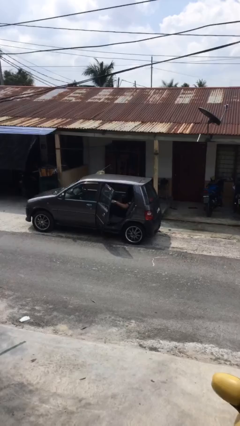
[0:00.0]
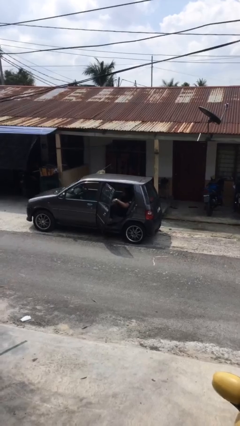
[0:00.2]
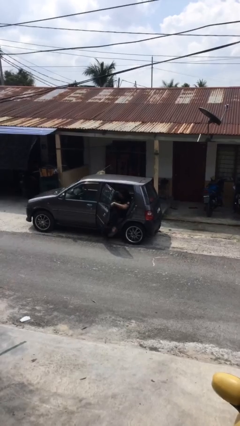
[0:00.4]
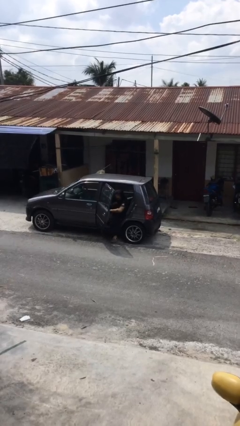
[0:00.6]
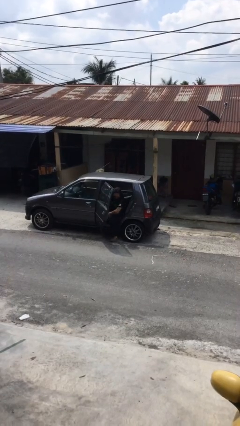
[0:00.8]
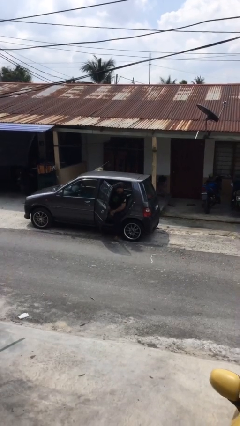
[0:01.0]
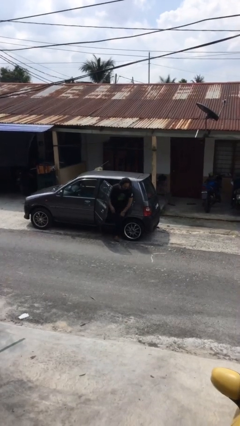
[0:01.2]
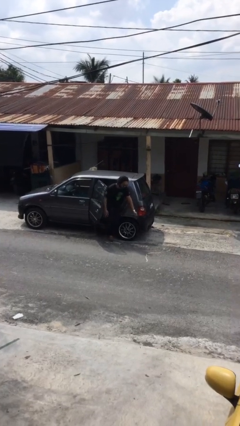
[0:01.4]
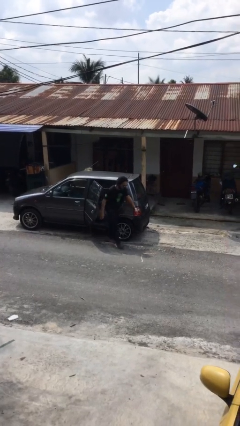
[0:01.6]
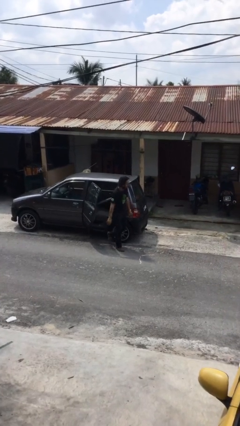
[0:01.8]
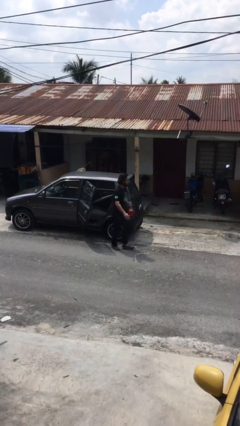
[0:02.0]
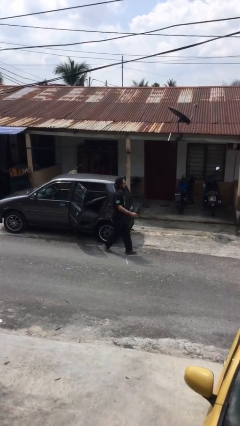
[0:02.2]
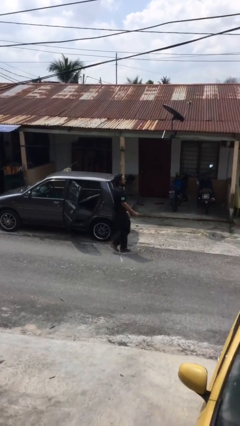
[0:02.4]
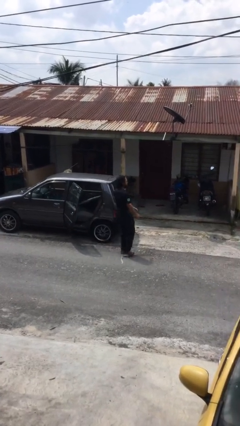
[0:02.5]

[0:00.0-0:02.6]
person exits car

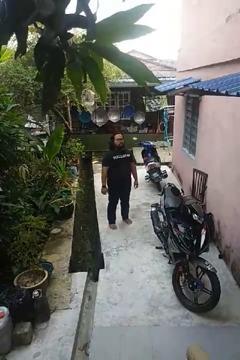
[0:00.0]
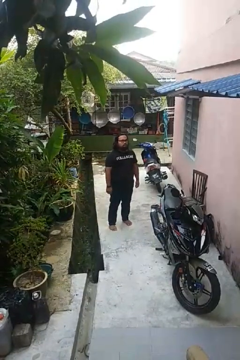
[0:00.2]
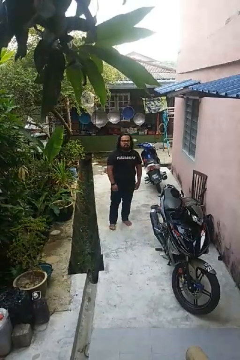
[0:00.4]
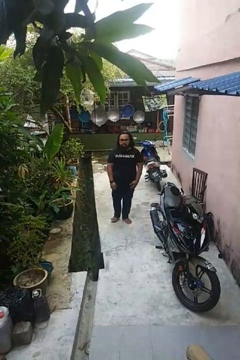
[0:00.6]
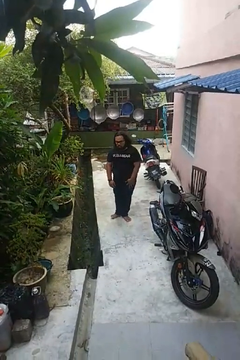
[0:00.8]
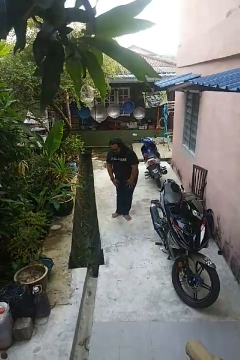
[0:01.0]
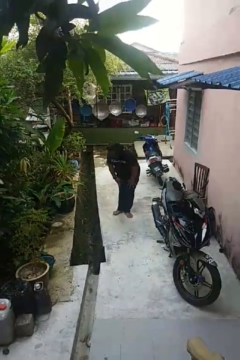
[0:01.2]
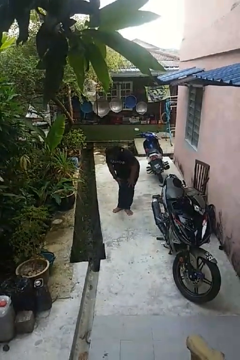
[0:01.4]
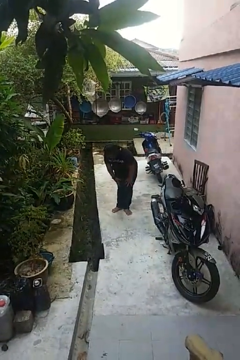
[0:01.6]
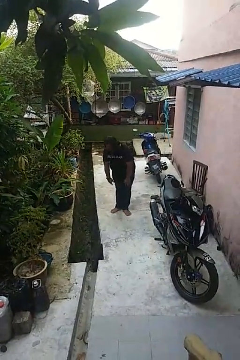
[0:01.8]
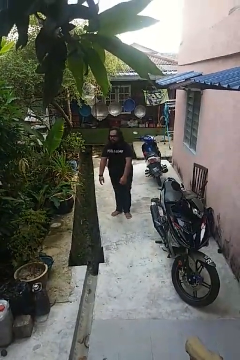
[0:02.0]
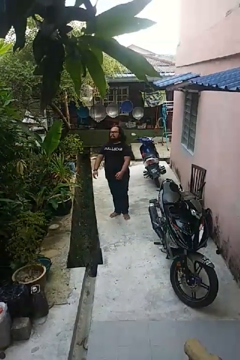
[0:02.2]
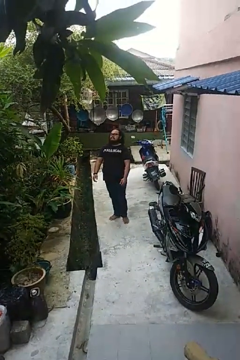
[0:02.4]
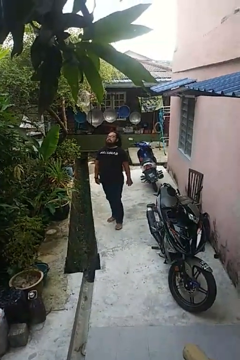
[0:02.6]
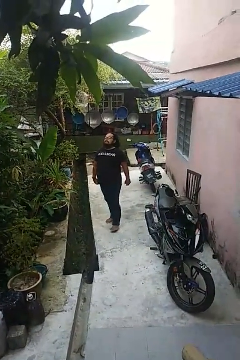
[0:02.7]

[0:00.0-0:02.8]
person bows

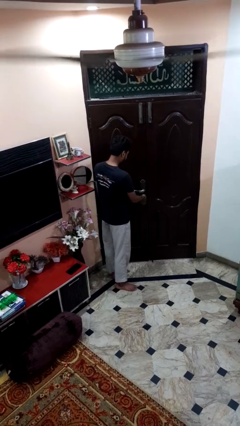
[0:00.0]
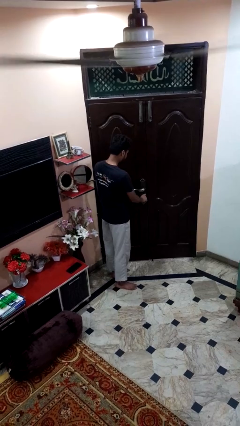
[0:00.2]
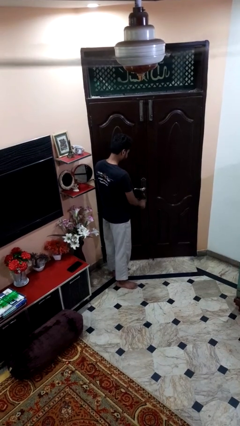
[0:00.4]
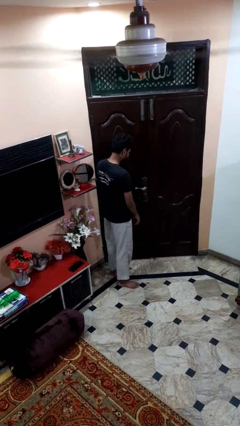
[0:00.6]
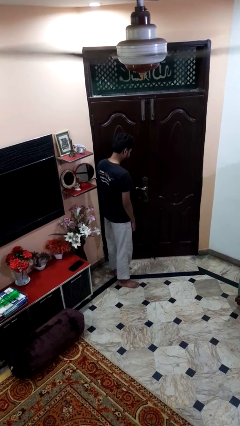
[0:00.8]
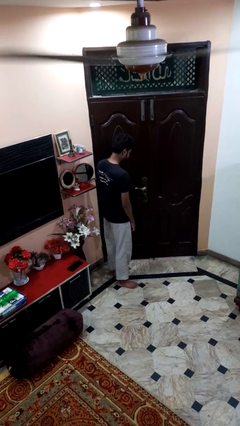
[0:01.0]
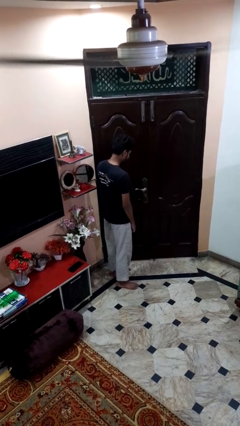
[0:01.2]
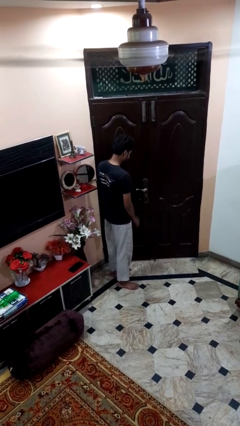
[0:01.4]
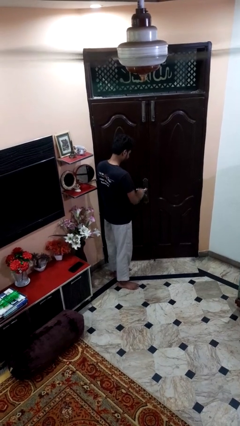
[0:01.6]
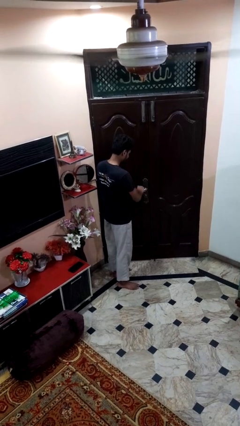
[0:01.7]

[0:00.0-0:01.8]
person unlocks door with keys

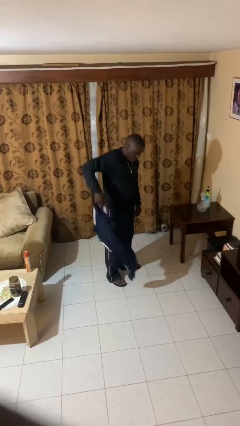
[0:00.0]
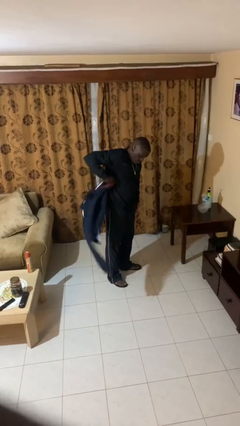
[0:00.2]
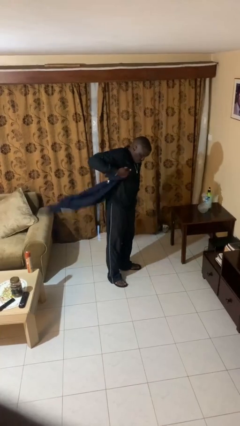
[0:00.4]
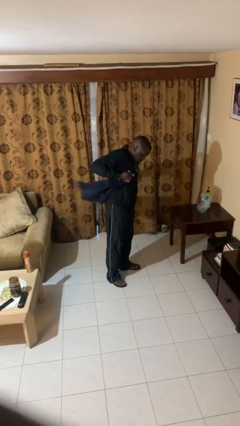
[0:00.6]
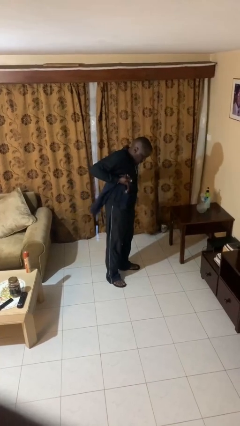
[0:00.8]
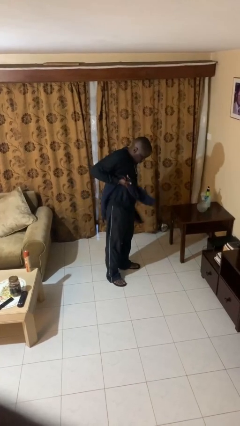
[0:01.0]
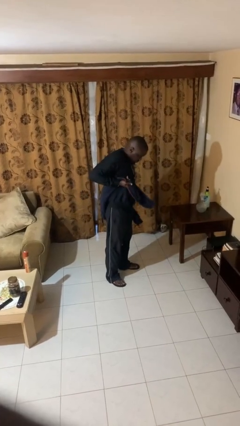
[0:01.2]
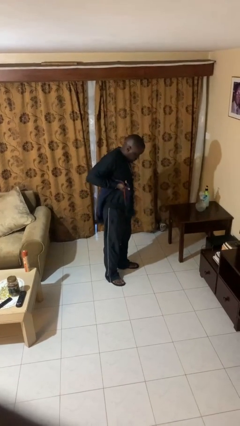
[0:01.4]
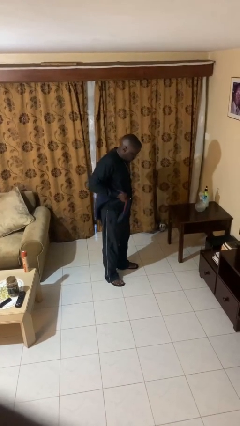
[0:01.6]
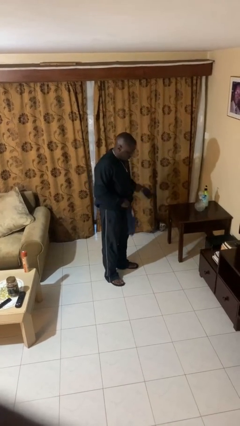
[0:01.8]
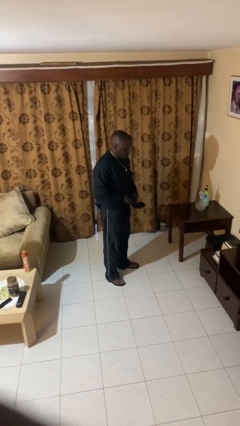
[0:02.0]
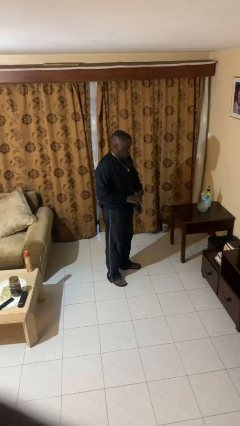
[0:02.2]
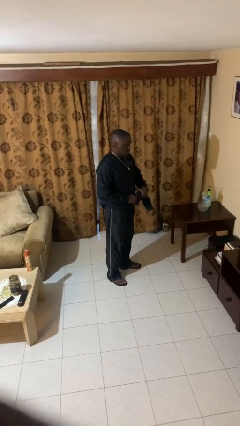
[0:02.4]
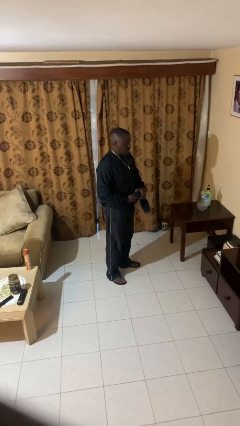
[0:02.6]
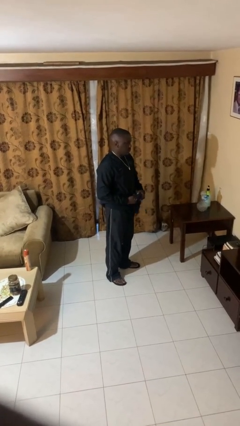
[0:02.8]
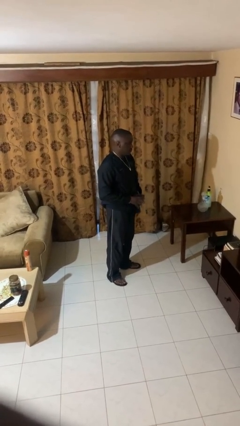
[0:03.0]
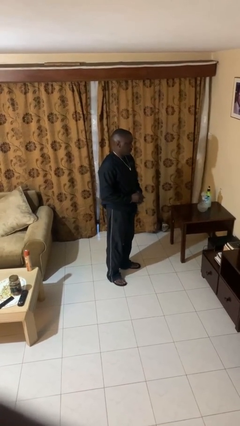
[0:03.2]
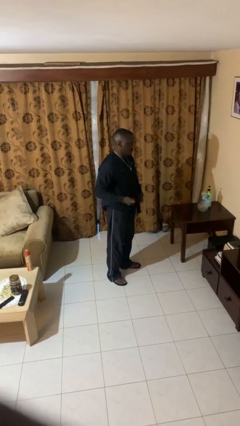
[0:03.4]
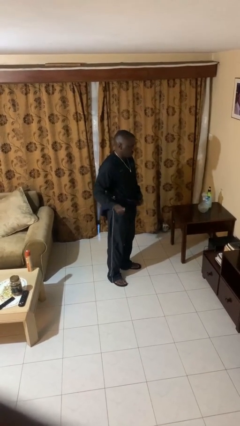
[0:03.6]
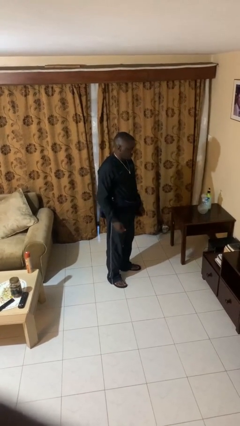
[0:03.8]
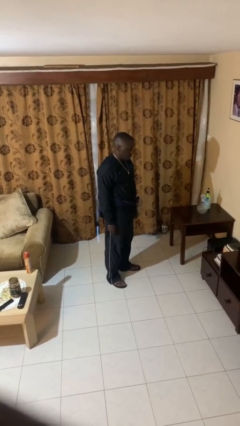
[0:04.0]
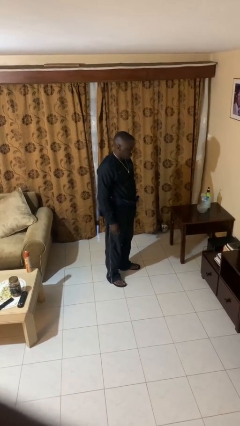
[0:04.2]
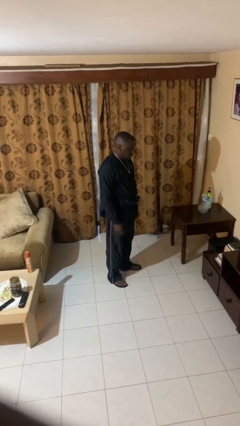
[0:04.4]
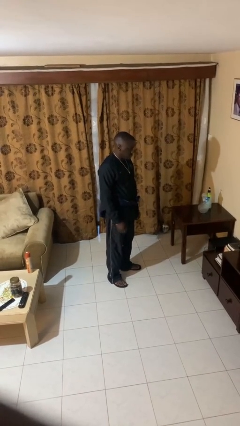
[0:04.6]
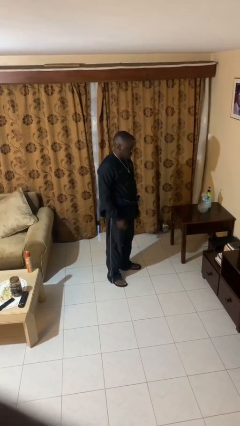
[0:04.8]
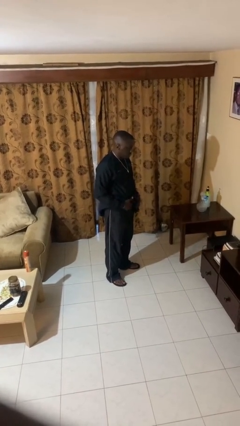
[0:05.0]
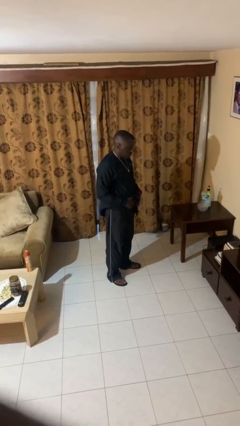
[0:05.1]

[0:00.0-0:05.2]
person ties jacket around waist

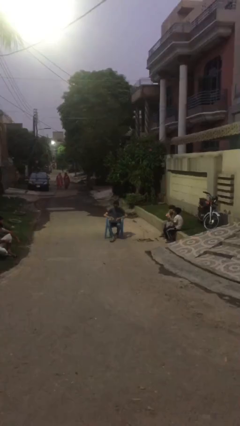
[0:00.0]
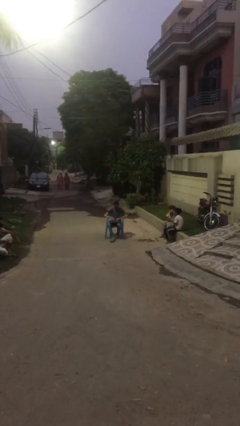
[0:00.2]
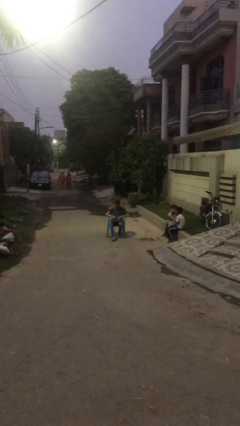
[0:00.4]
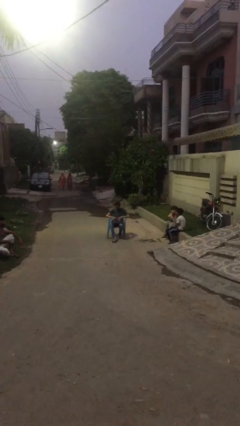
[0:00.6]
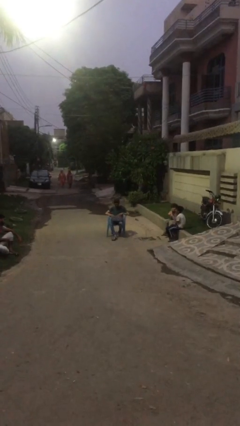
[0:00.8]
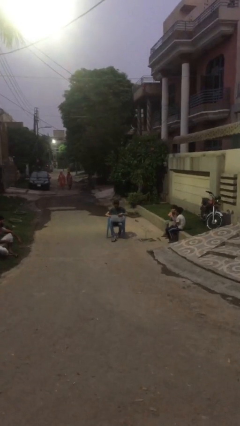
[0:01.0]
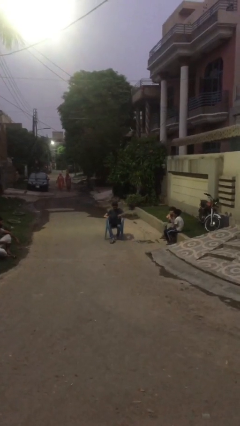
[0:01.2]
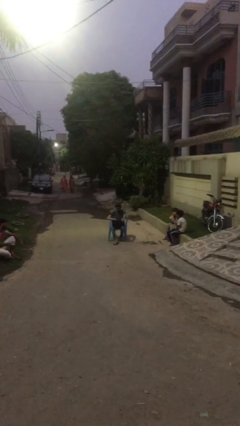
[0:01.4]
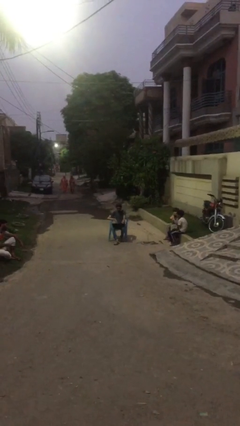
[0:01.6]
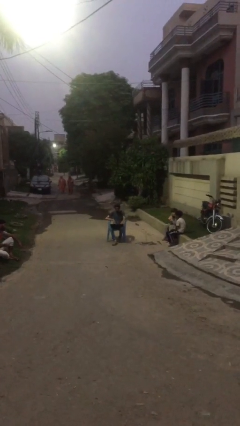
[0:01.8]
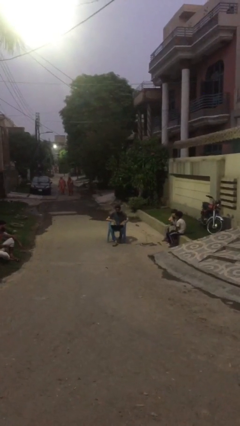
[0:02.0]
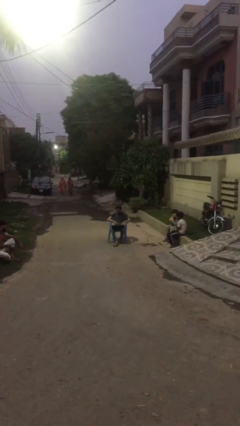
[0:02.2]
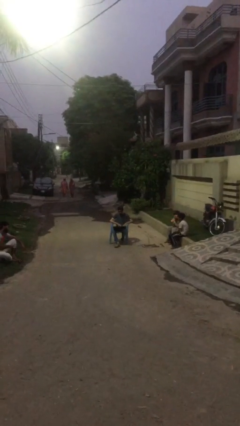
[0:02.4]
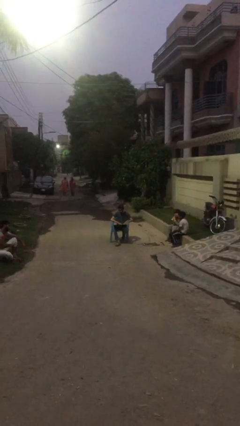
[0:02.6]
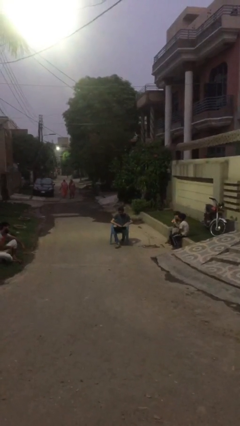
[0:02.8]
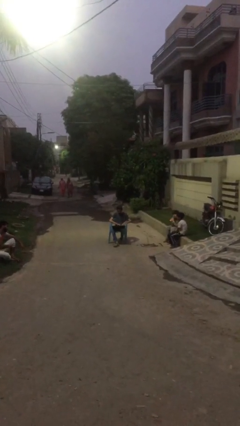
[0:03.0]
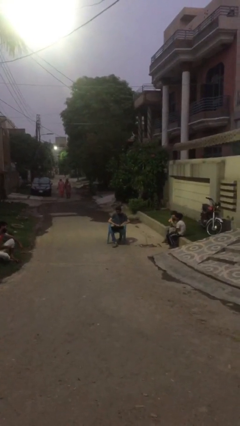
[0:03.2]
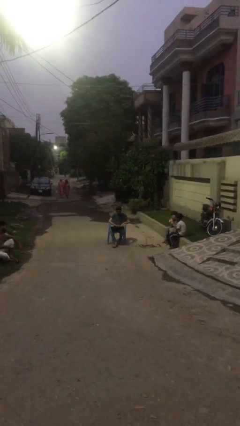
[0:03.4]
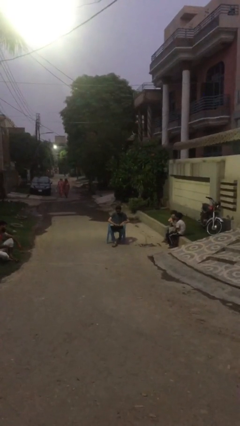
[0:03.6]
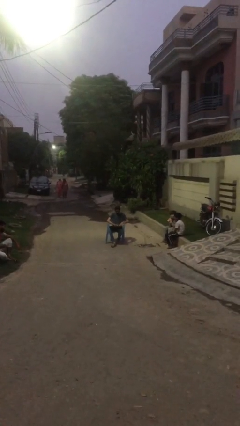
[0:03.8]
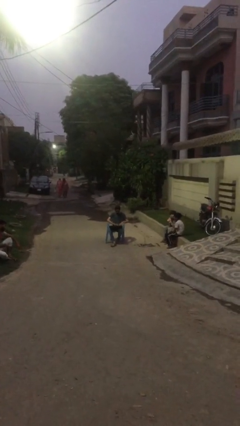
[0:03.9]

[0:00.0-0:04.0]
person interacts with laptop

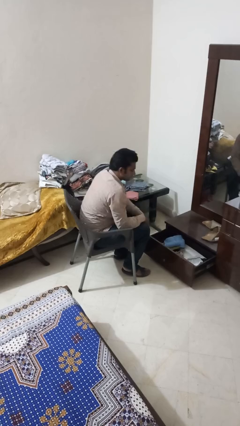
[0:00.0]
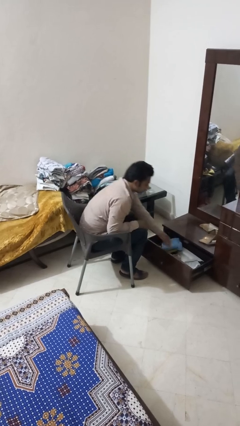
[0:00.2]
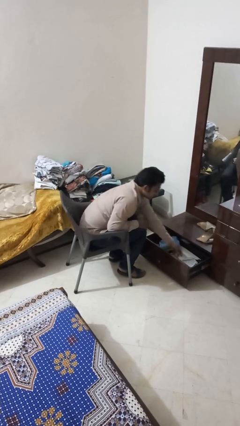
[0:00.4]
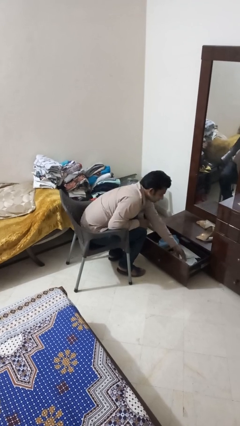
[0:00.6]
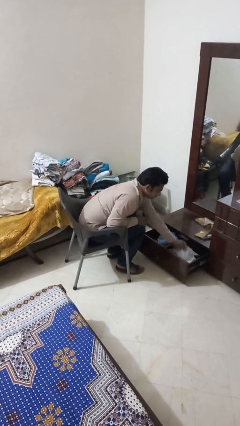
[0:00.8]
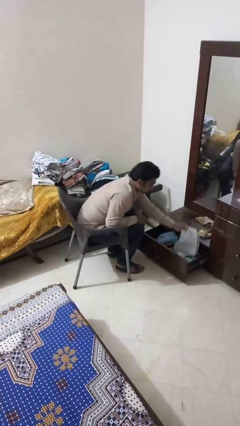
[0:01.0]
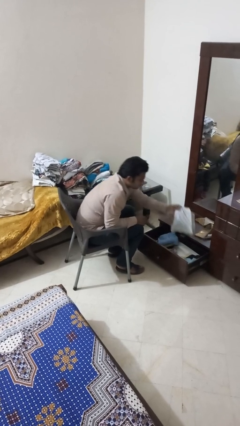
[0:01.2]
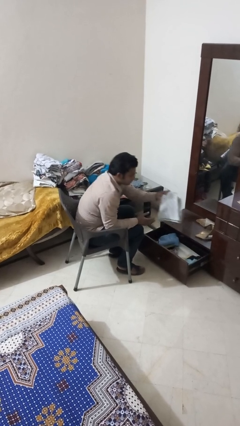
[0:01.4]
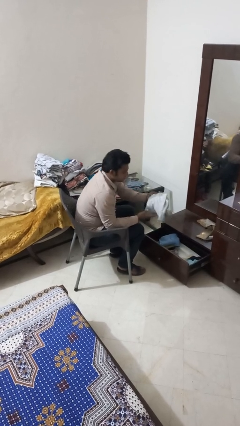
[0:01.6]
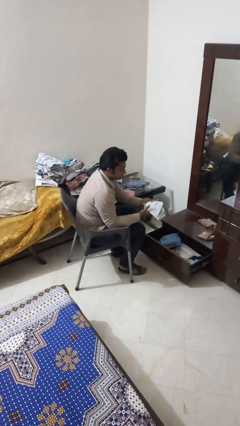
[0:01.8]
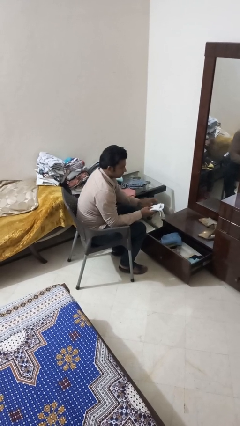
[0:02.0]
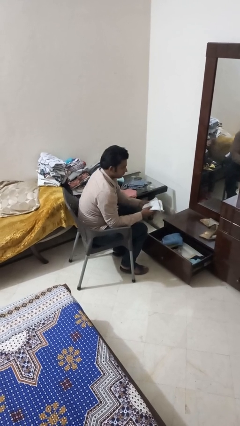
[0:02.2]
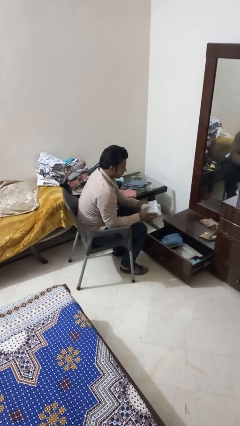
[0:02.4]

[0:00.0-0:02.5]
person takes clothes from dresser
